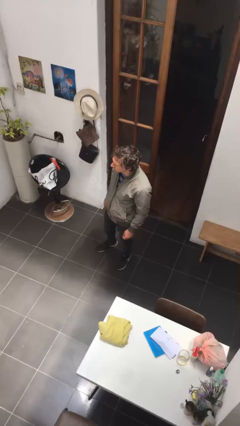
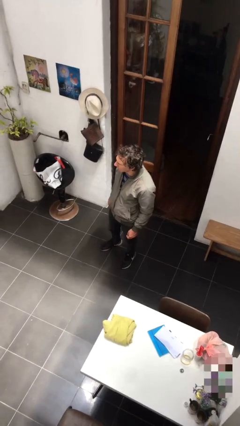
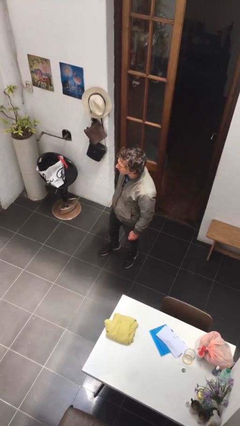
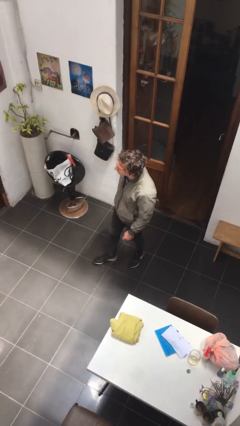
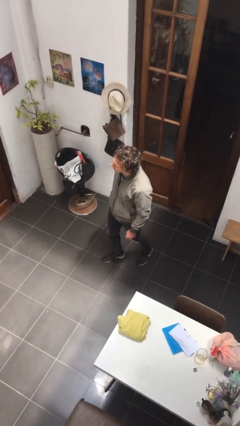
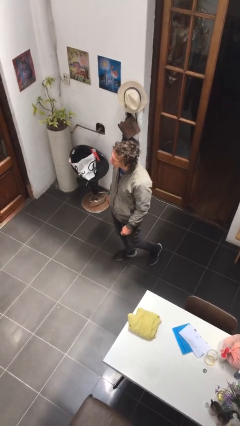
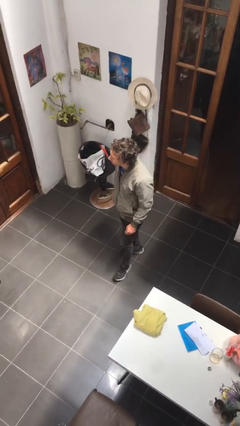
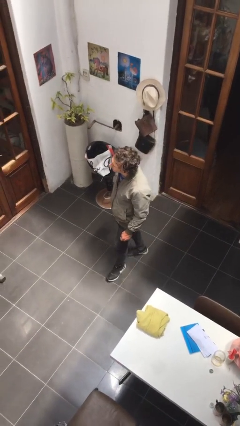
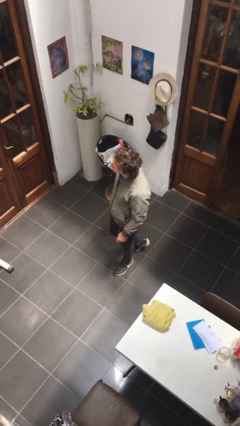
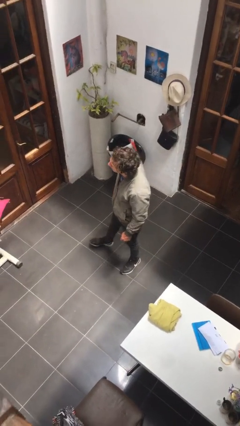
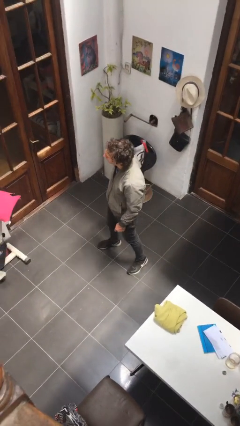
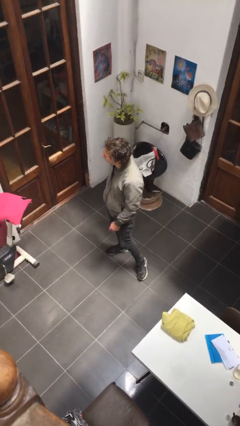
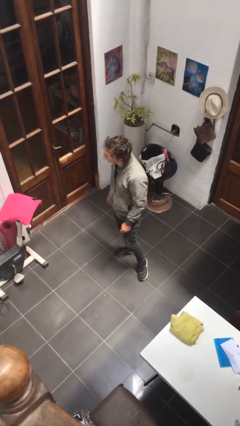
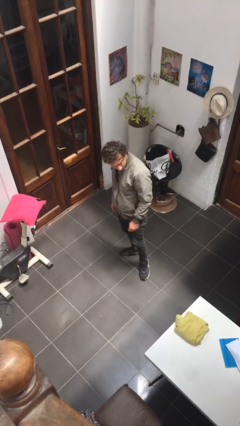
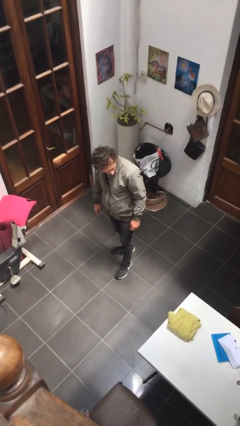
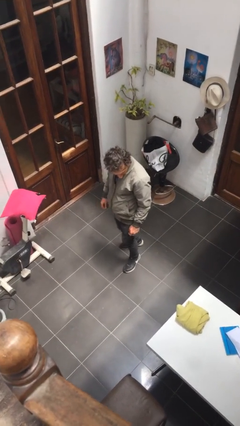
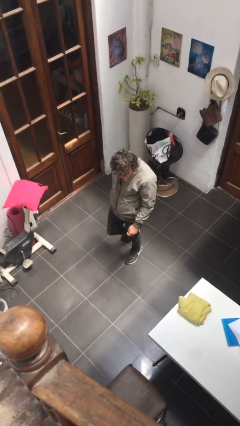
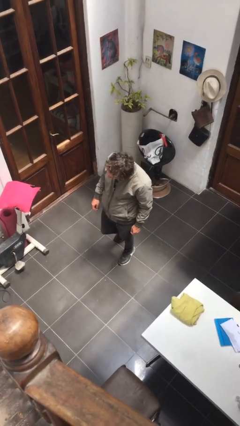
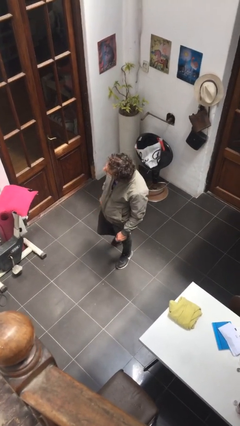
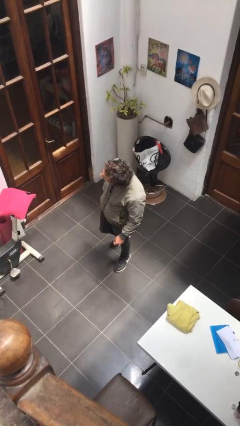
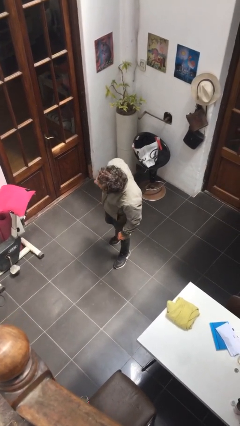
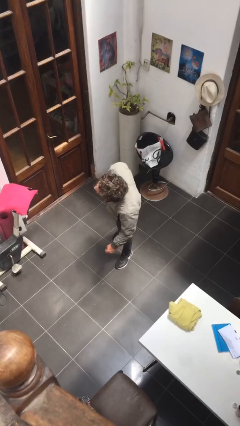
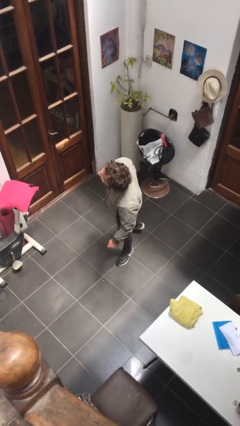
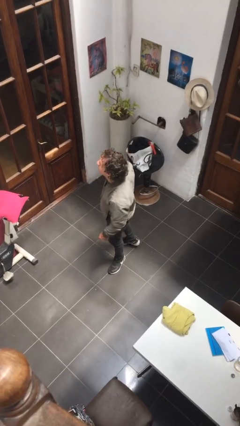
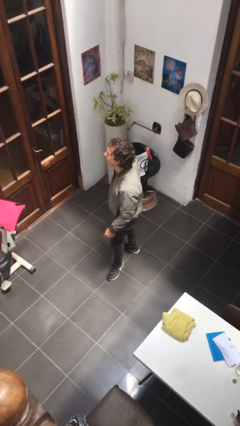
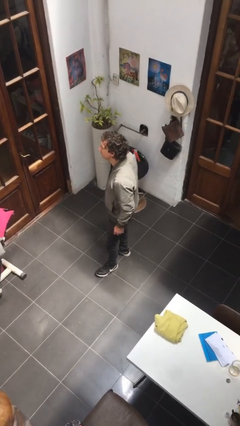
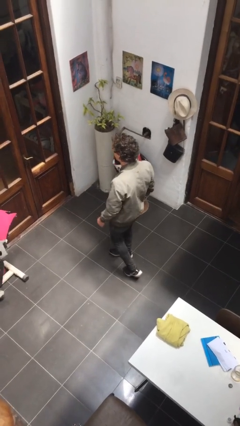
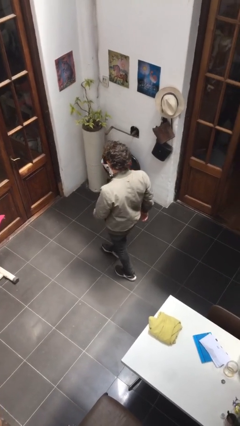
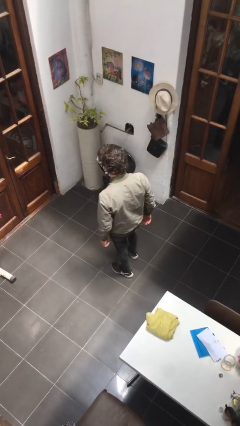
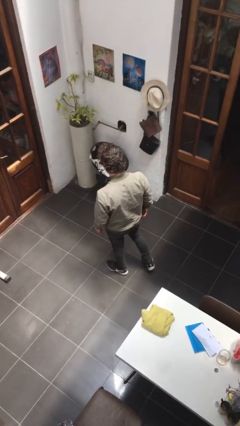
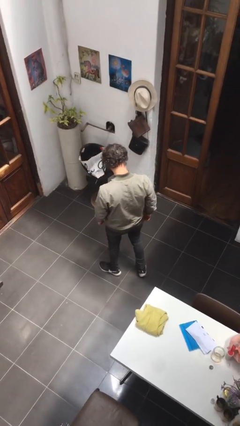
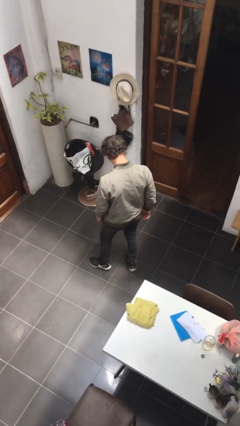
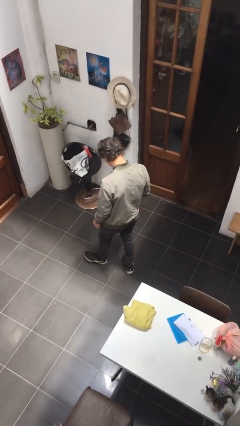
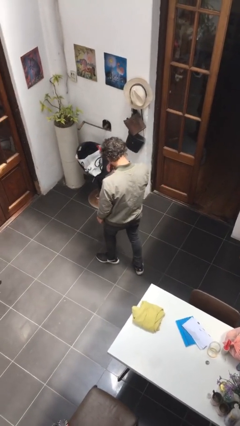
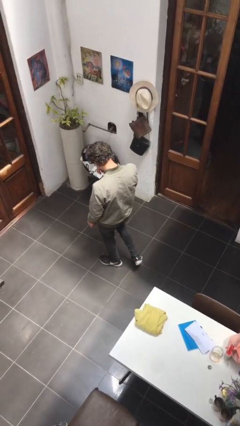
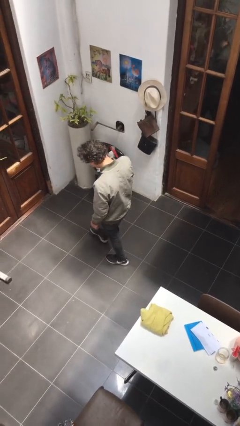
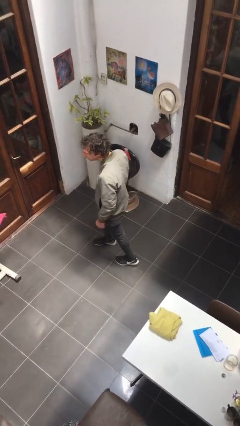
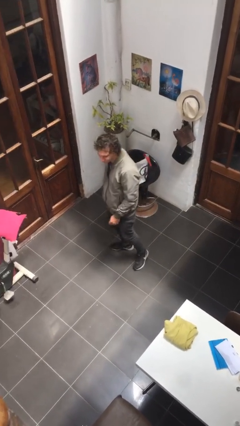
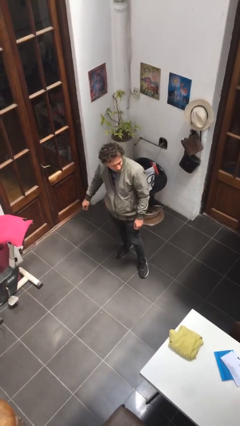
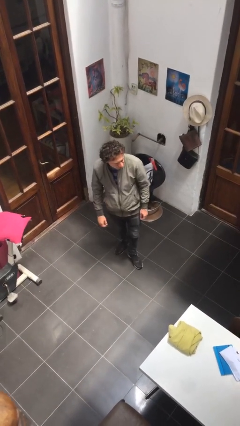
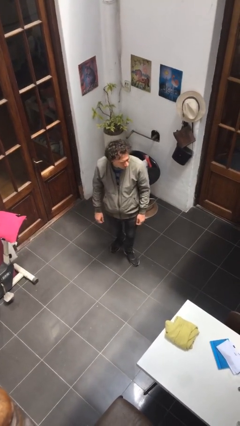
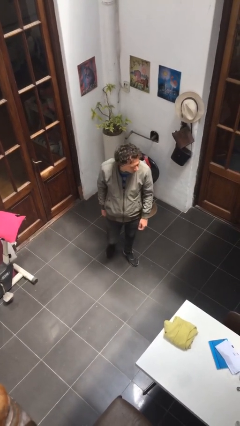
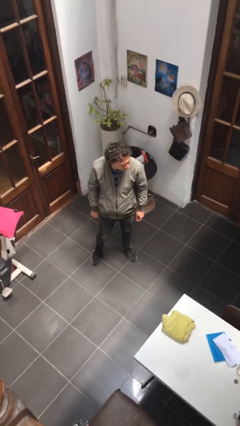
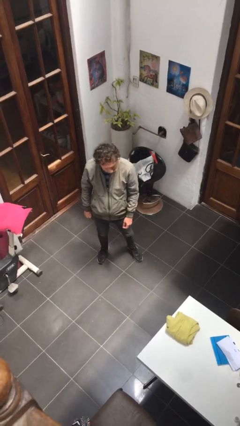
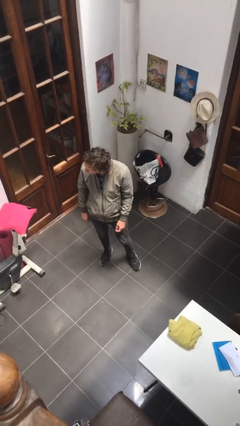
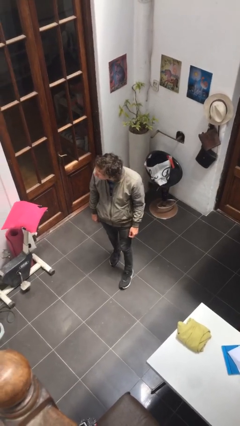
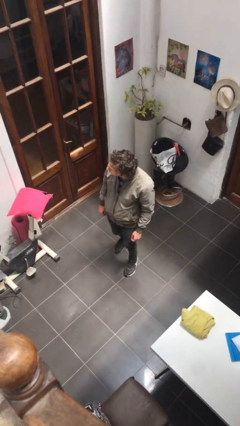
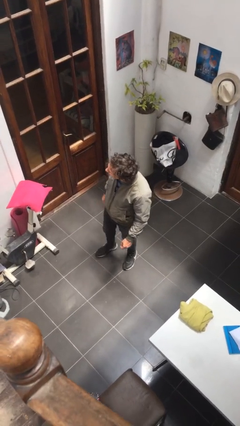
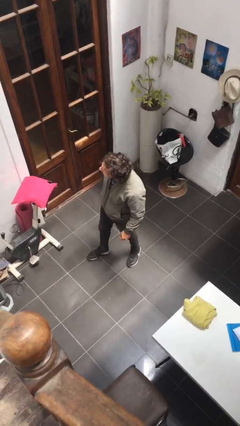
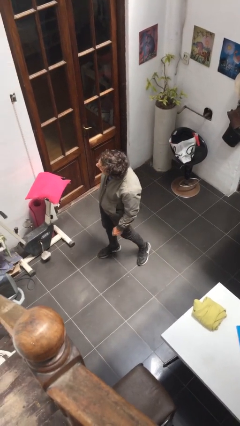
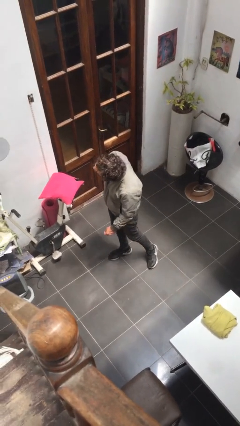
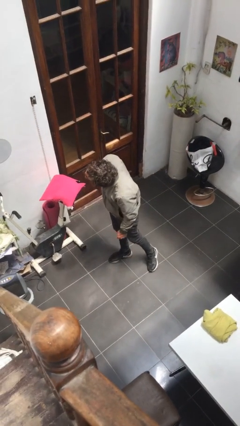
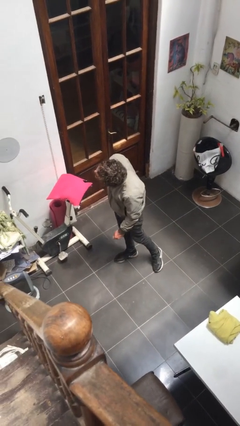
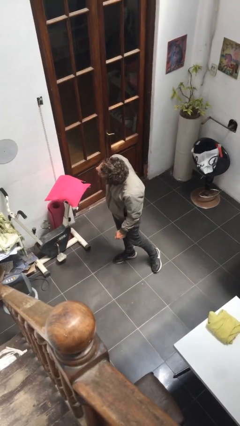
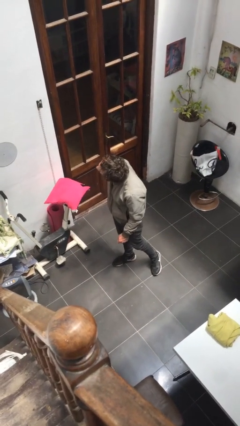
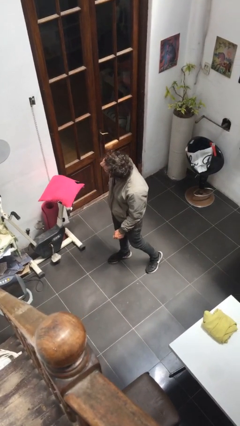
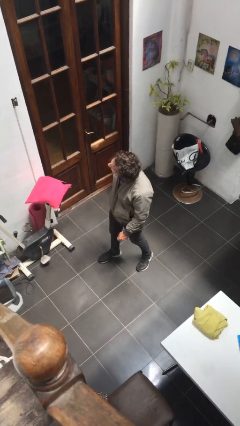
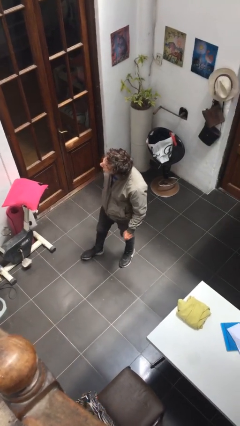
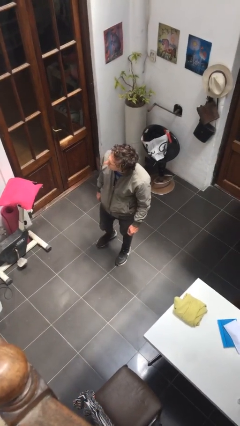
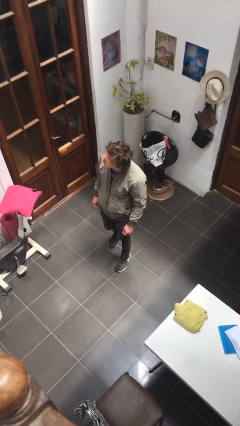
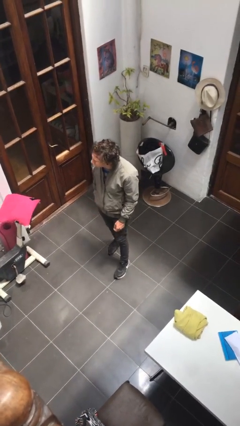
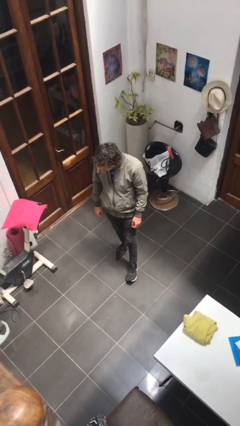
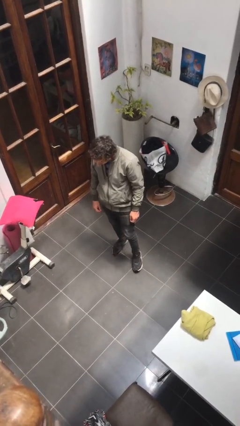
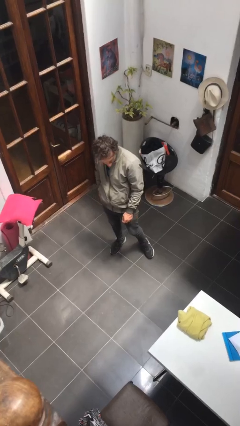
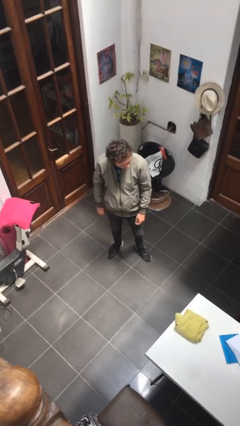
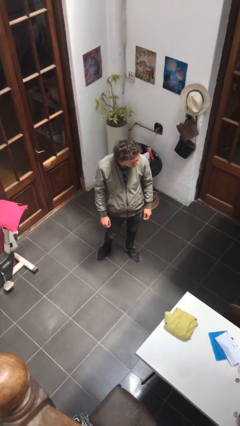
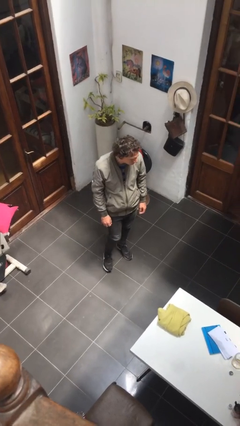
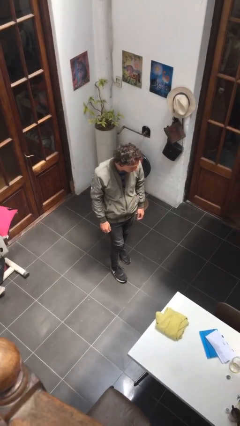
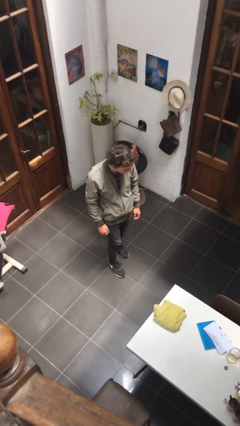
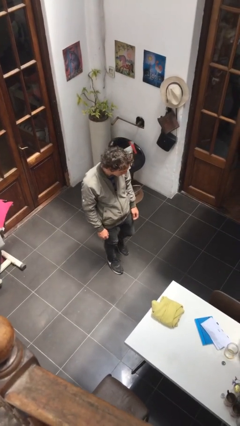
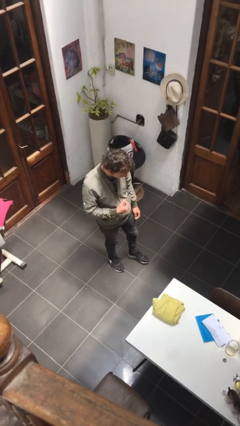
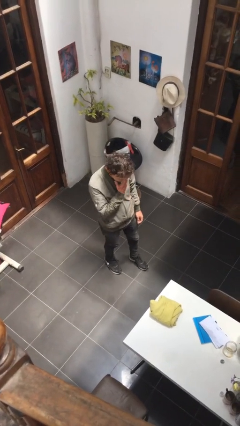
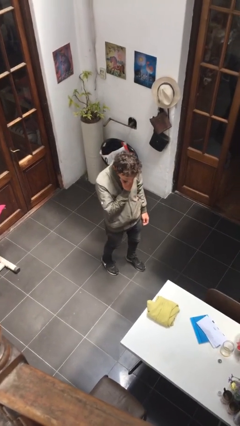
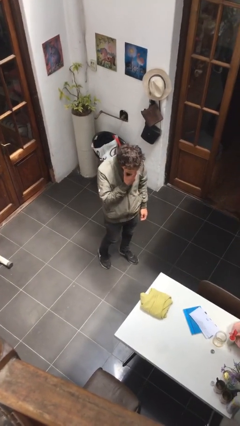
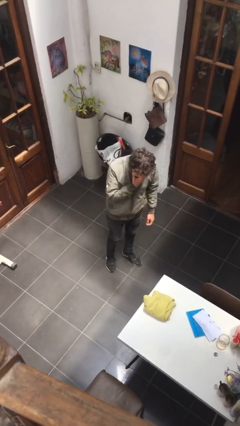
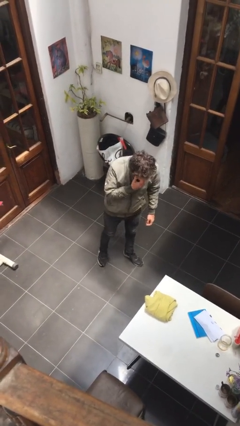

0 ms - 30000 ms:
person walks

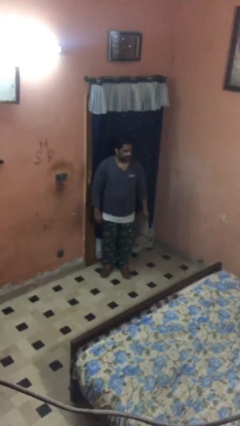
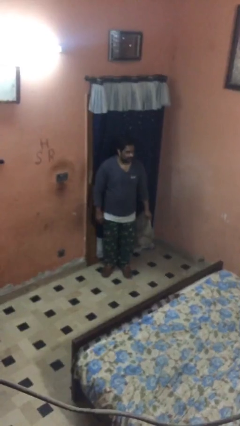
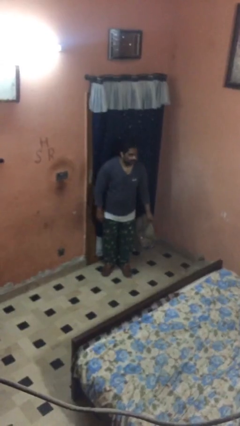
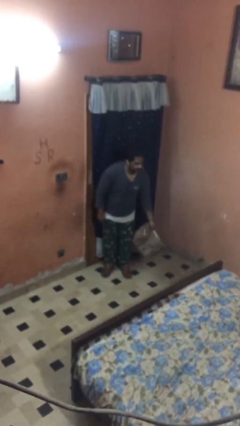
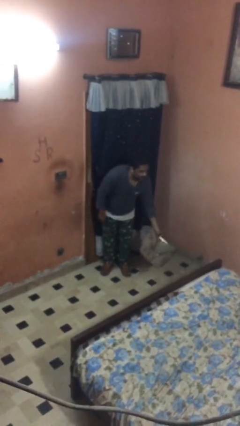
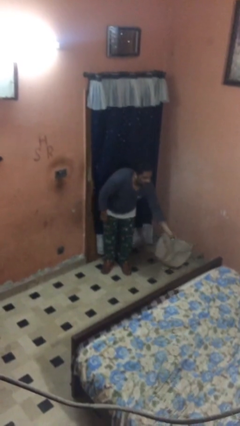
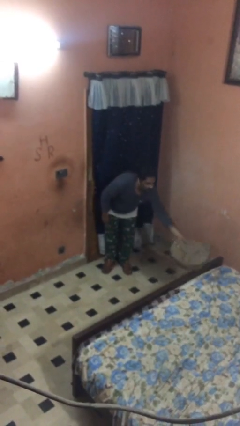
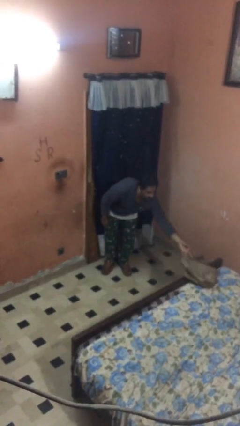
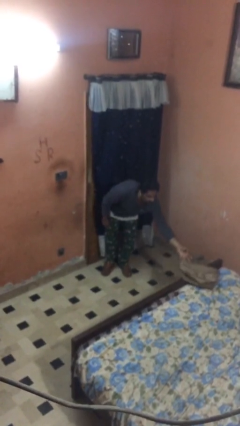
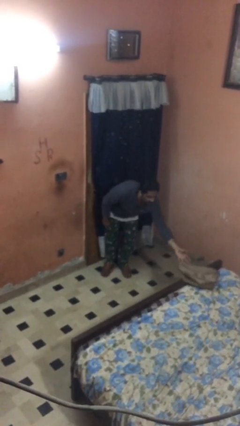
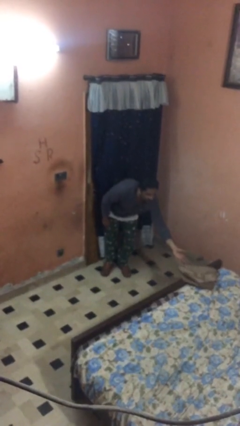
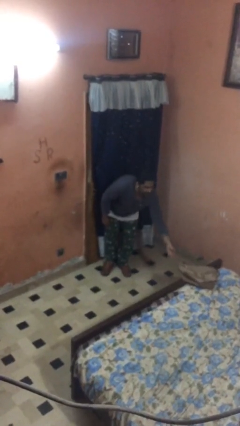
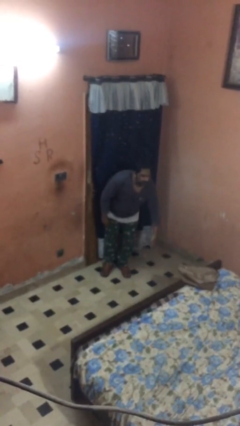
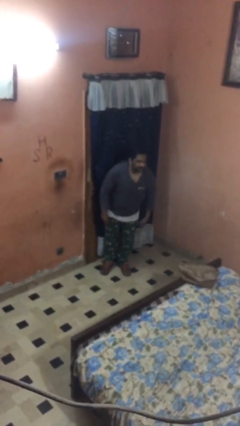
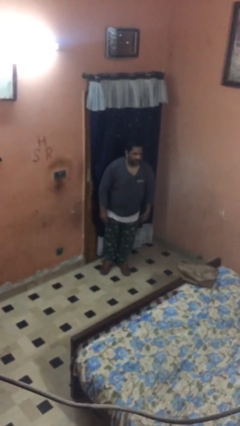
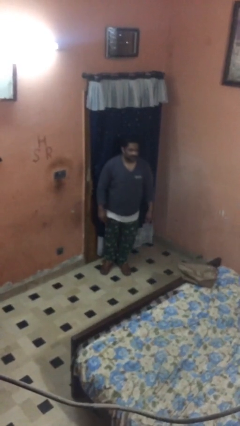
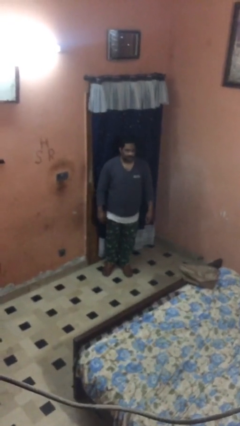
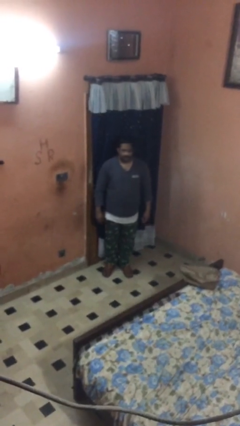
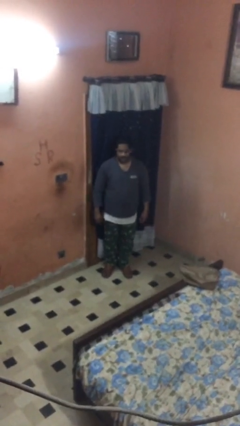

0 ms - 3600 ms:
person puts down object on table
